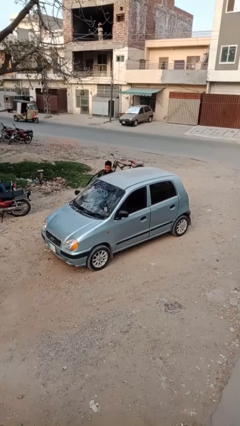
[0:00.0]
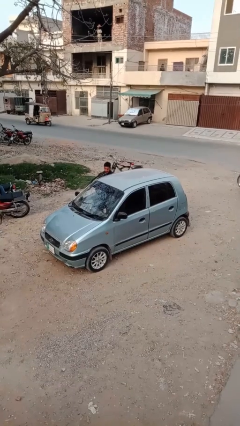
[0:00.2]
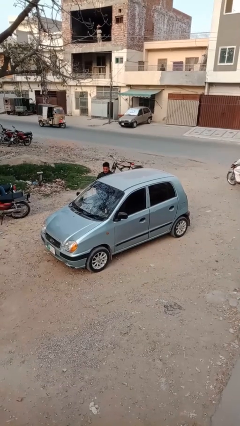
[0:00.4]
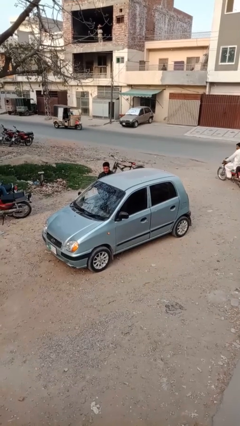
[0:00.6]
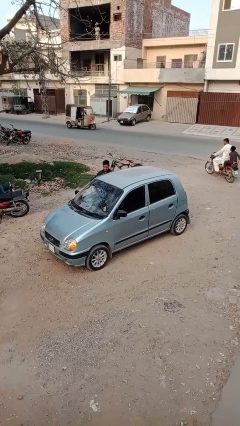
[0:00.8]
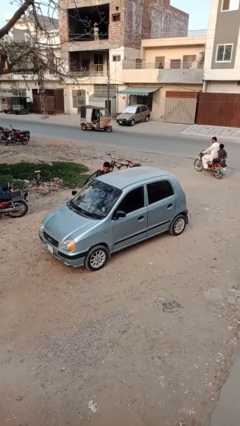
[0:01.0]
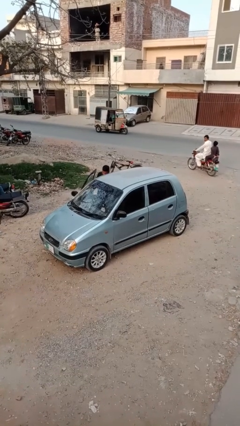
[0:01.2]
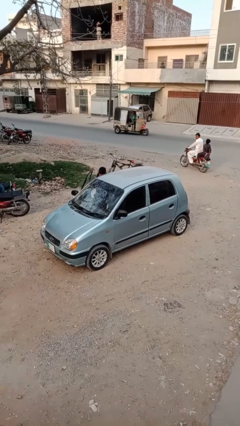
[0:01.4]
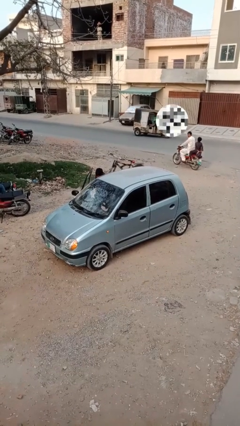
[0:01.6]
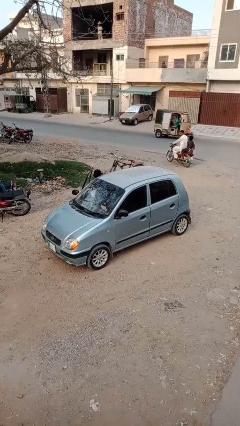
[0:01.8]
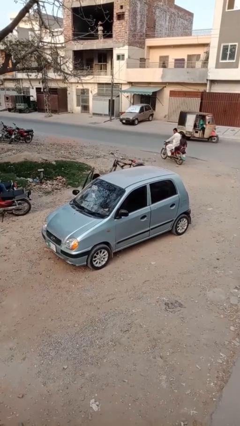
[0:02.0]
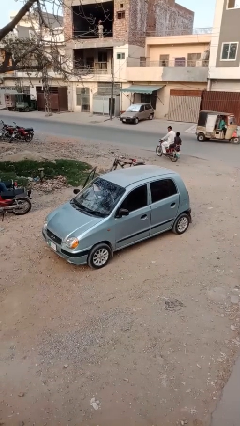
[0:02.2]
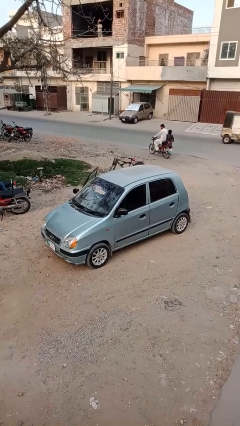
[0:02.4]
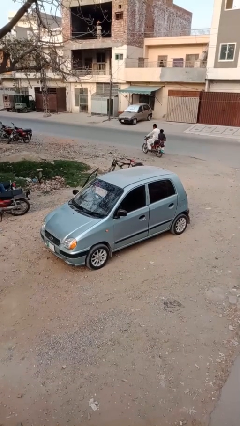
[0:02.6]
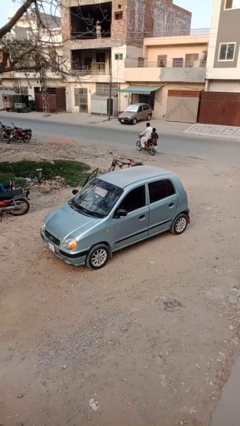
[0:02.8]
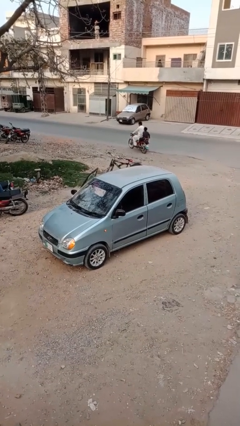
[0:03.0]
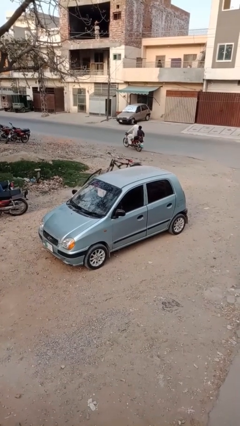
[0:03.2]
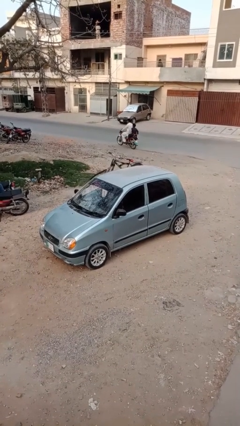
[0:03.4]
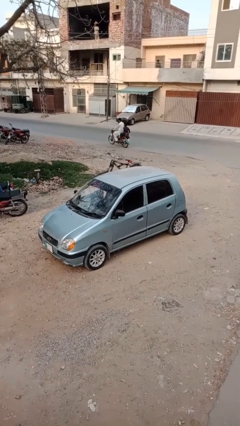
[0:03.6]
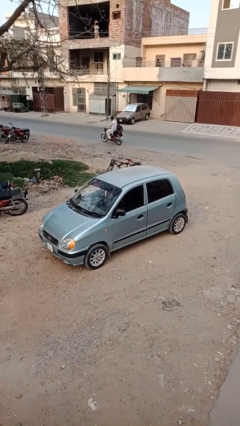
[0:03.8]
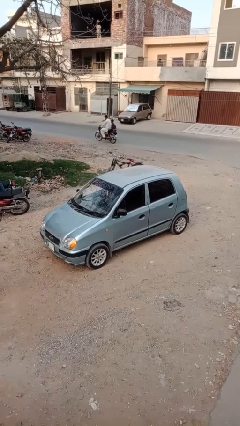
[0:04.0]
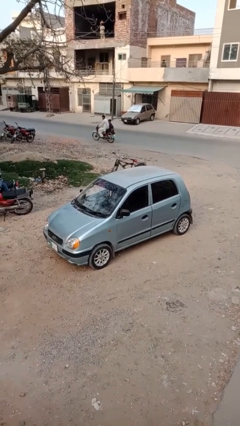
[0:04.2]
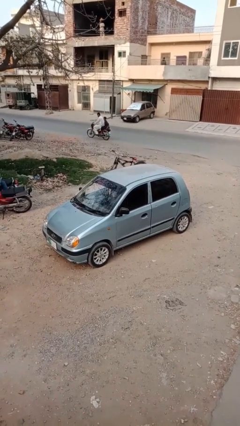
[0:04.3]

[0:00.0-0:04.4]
car picks up person

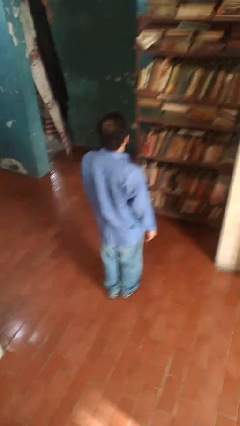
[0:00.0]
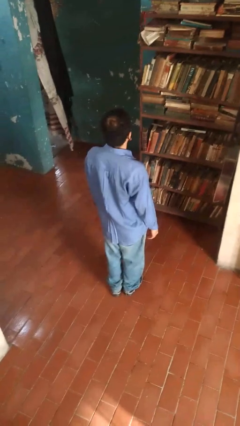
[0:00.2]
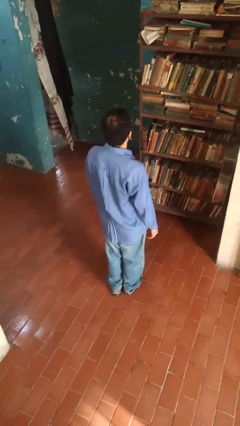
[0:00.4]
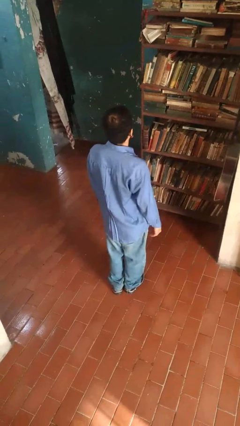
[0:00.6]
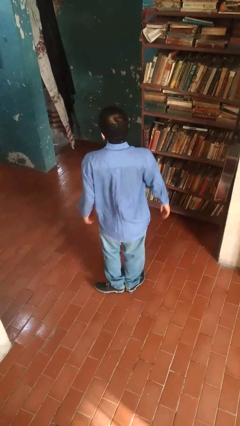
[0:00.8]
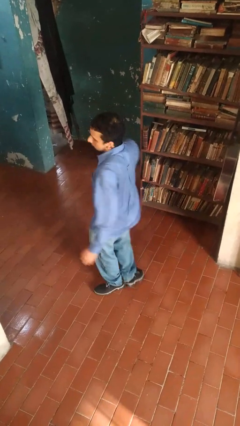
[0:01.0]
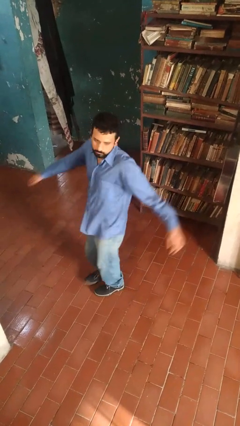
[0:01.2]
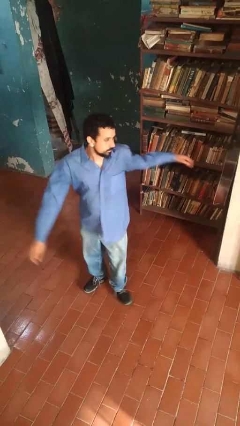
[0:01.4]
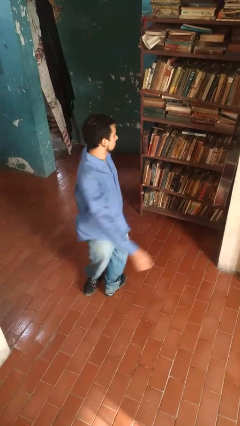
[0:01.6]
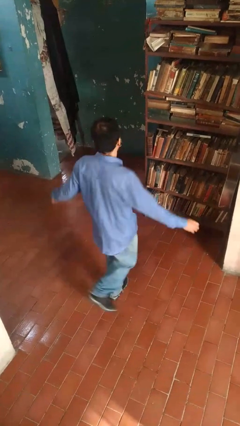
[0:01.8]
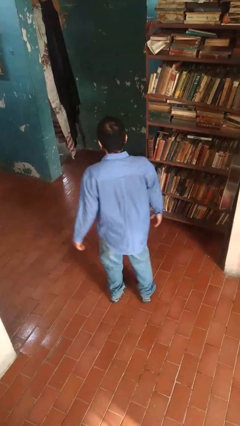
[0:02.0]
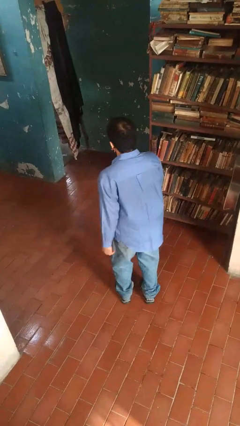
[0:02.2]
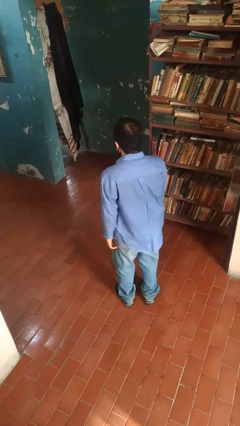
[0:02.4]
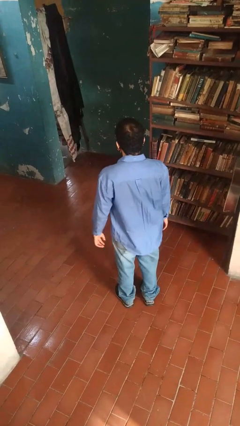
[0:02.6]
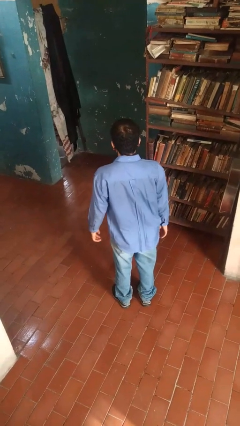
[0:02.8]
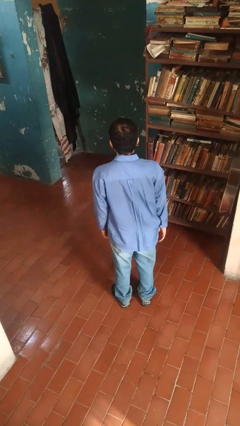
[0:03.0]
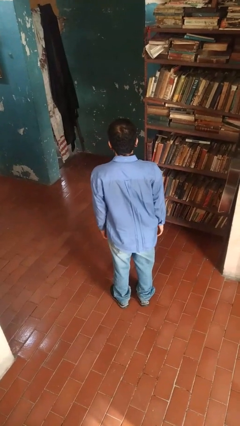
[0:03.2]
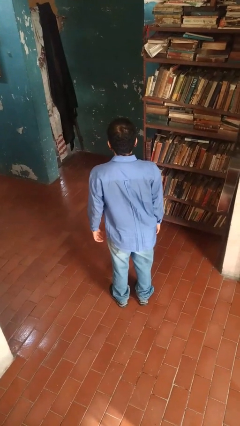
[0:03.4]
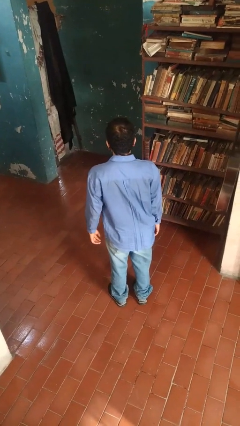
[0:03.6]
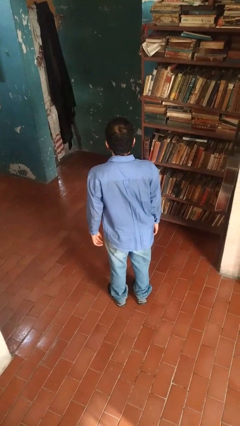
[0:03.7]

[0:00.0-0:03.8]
person twirls

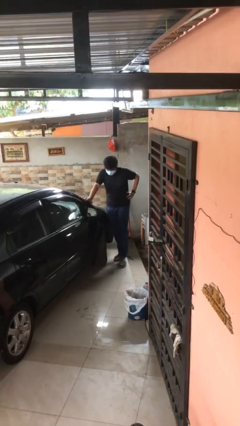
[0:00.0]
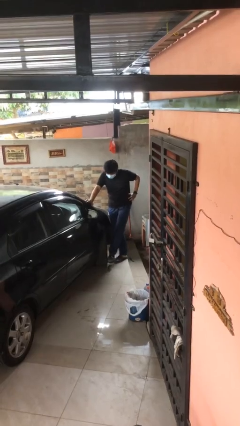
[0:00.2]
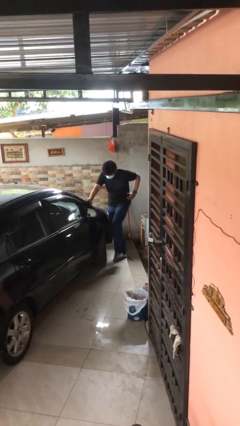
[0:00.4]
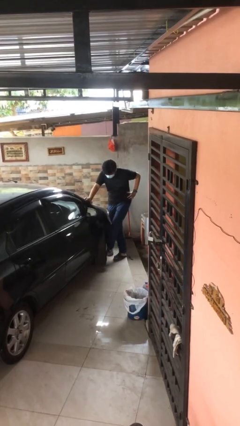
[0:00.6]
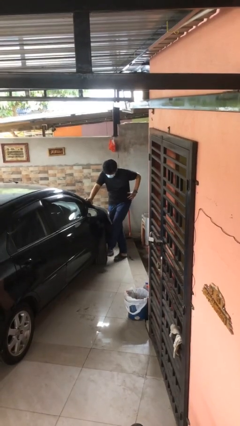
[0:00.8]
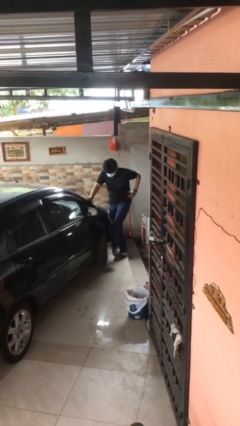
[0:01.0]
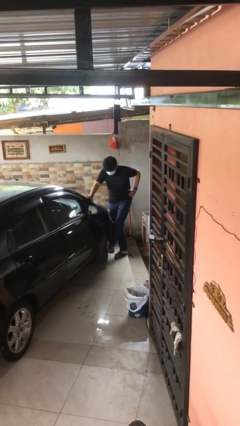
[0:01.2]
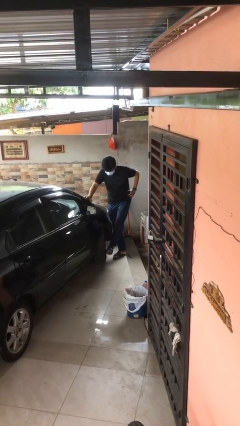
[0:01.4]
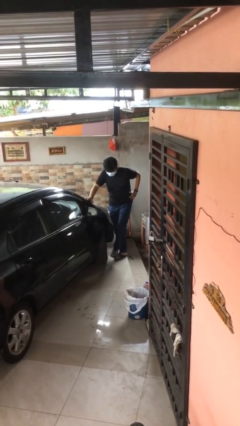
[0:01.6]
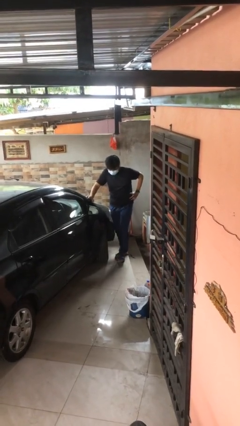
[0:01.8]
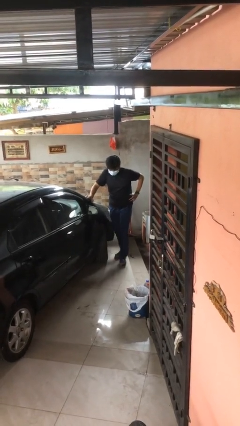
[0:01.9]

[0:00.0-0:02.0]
person kicks car tires

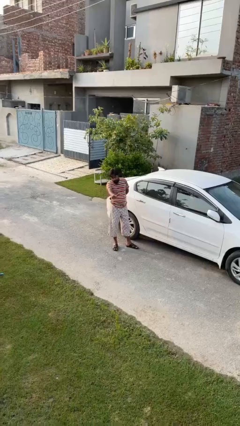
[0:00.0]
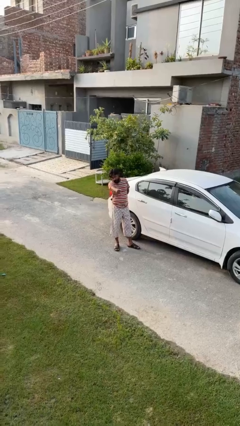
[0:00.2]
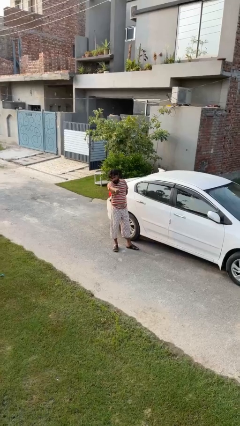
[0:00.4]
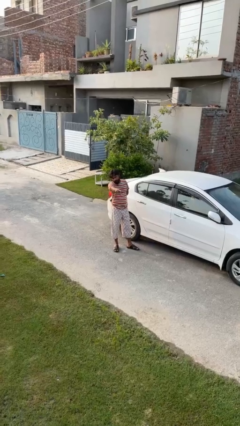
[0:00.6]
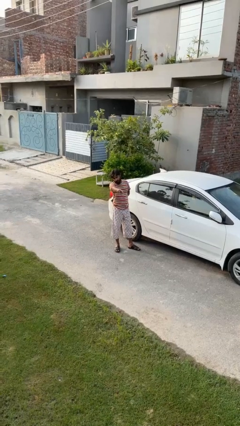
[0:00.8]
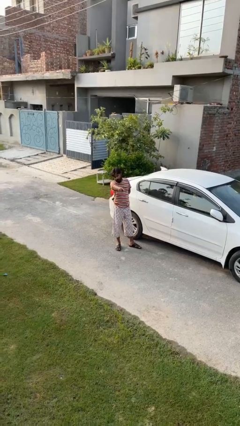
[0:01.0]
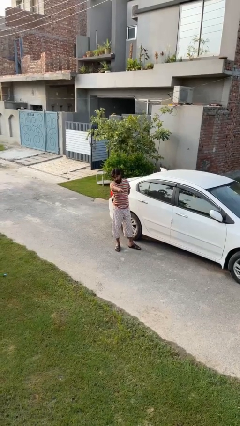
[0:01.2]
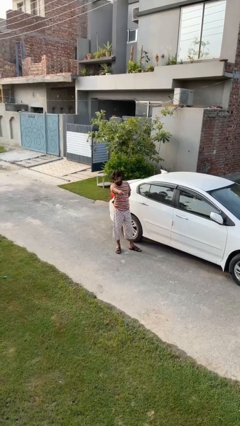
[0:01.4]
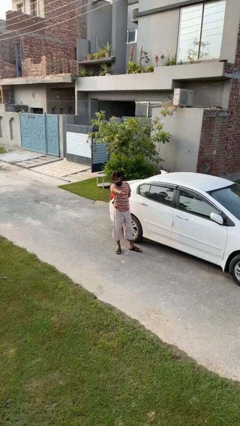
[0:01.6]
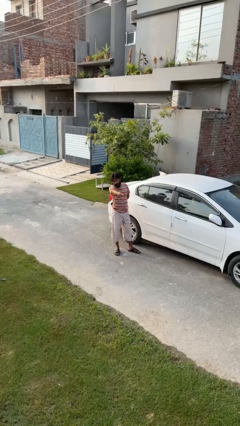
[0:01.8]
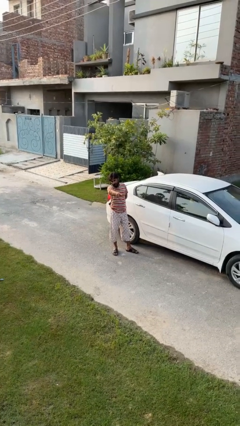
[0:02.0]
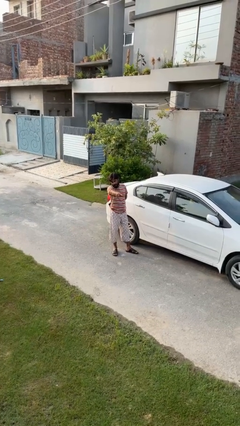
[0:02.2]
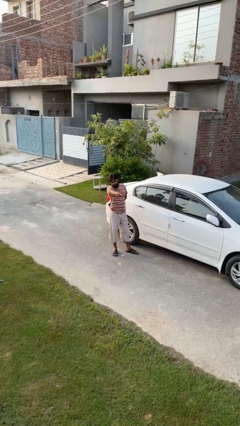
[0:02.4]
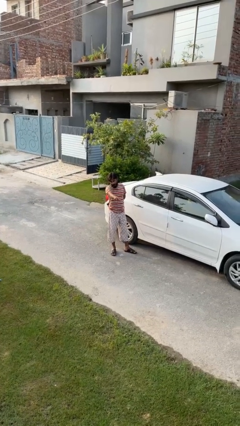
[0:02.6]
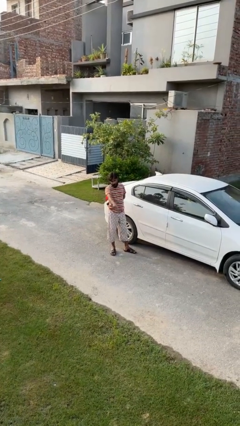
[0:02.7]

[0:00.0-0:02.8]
person points at person

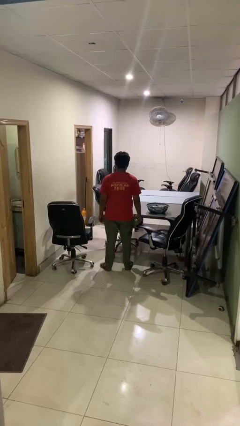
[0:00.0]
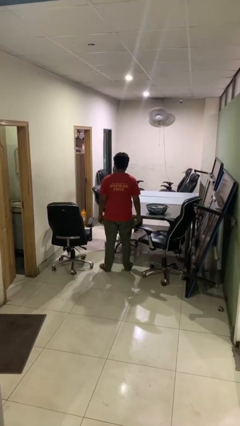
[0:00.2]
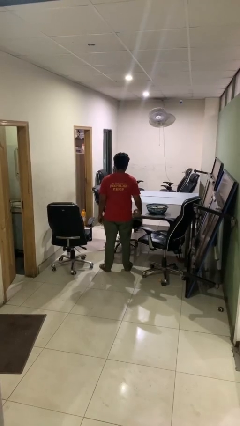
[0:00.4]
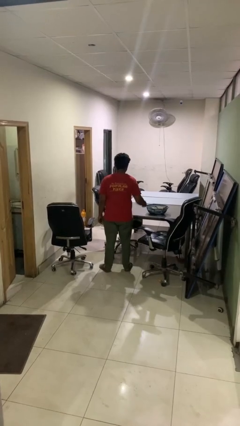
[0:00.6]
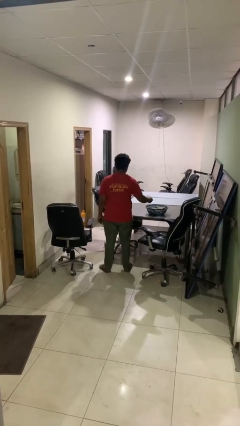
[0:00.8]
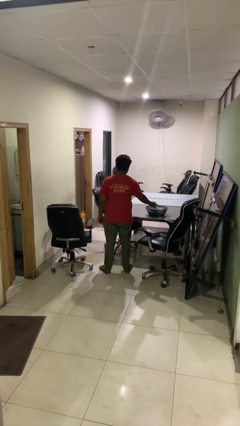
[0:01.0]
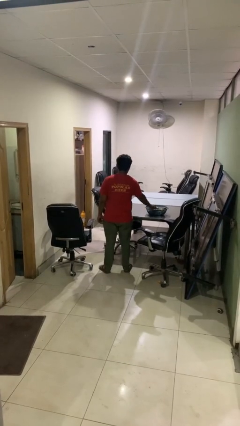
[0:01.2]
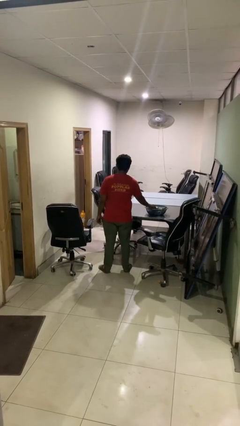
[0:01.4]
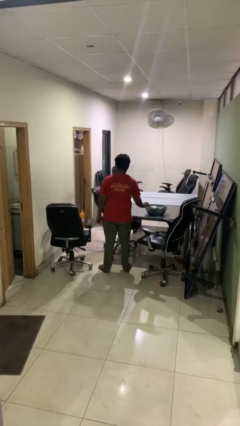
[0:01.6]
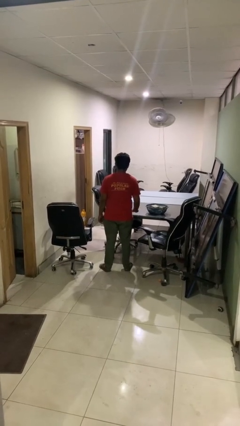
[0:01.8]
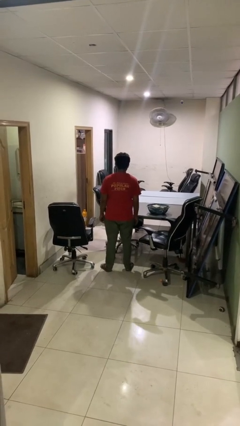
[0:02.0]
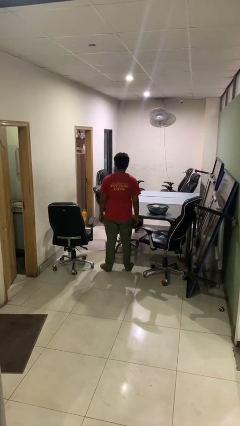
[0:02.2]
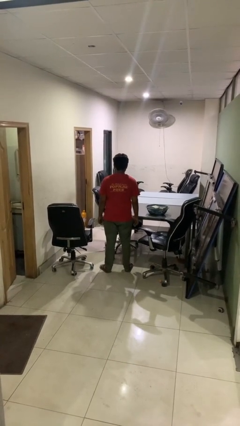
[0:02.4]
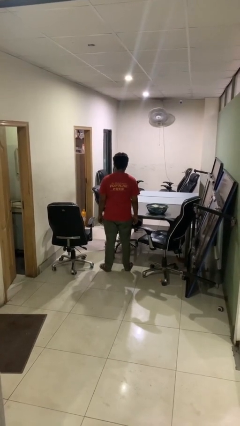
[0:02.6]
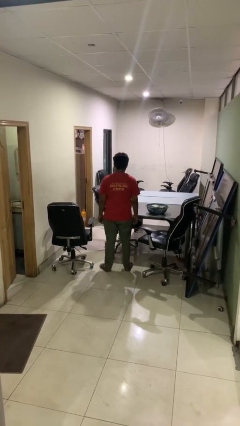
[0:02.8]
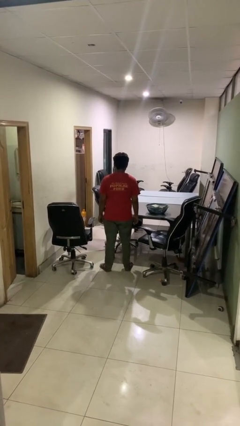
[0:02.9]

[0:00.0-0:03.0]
person puts object into basket

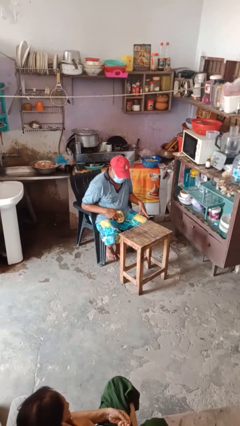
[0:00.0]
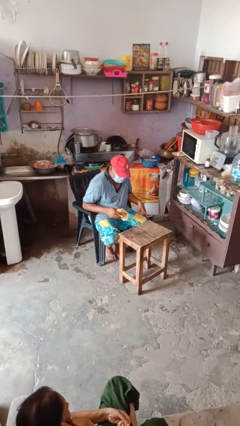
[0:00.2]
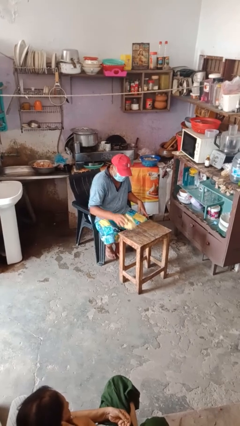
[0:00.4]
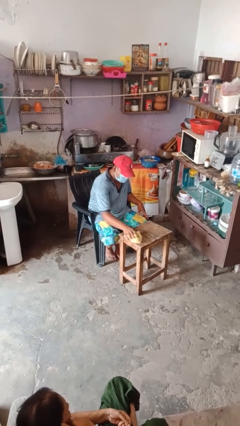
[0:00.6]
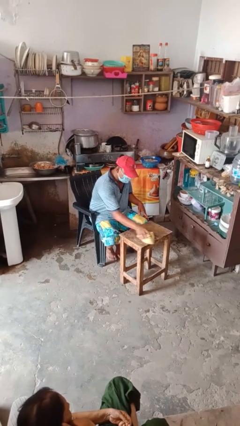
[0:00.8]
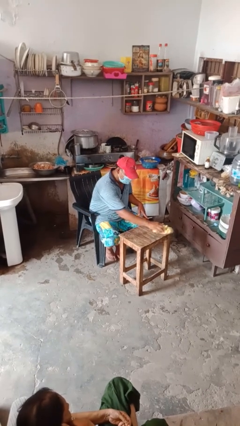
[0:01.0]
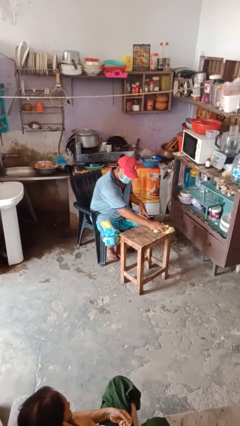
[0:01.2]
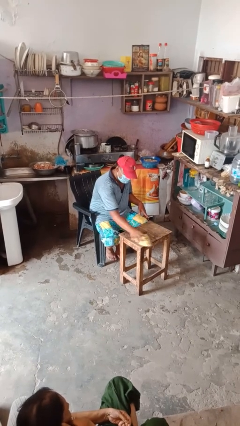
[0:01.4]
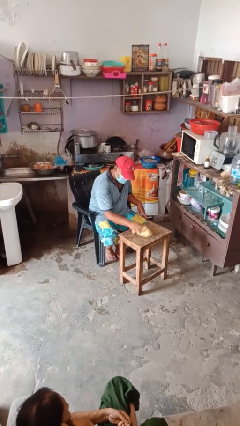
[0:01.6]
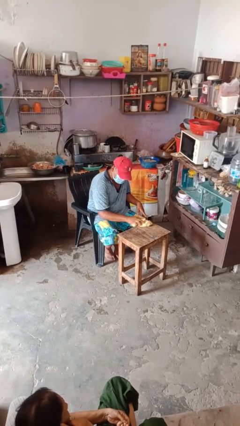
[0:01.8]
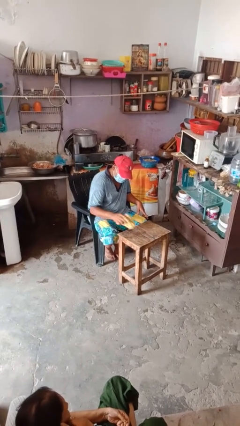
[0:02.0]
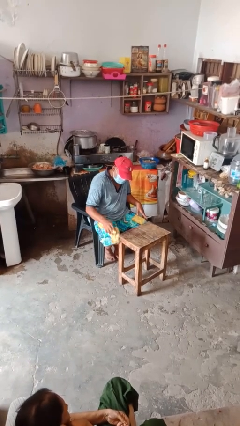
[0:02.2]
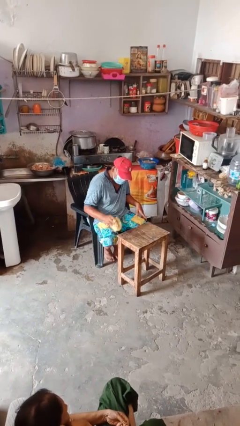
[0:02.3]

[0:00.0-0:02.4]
person cleans table with rag
